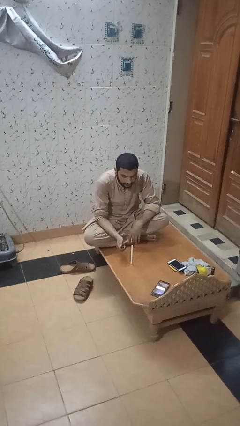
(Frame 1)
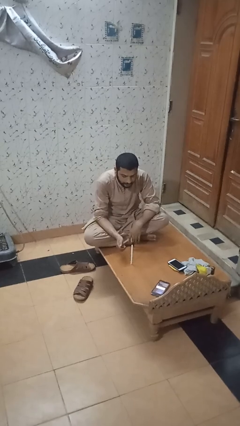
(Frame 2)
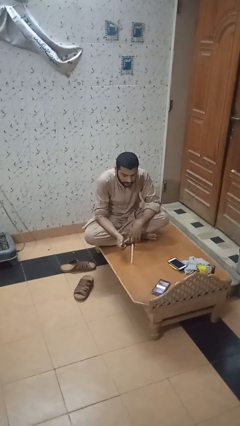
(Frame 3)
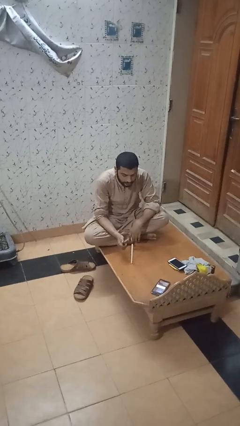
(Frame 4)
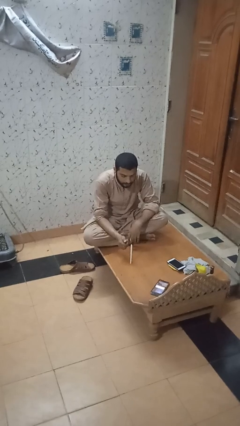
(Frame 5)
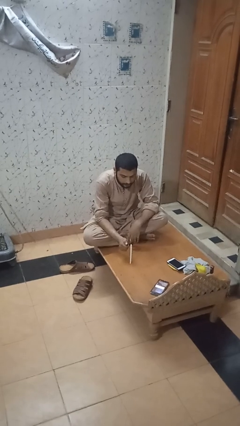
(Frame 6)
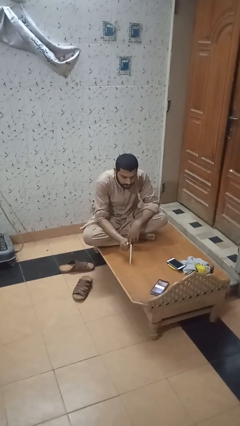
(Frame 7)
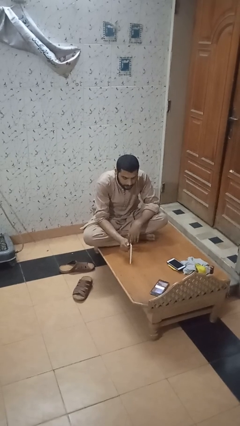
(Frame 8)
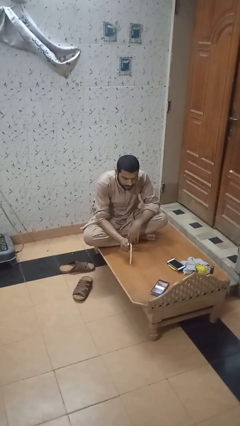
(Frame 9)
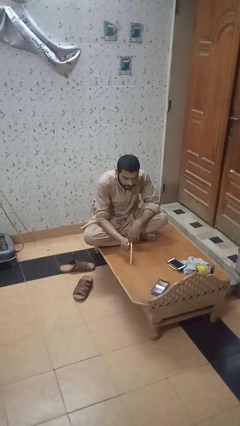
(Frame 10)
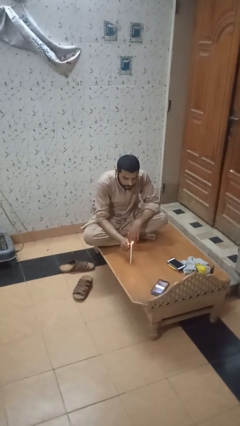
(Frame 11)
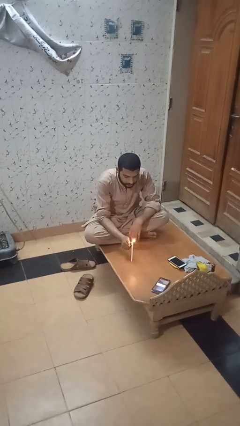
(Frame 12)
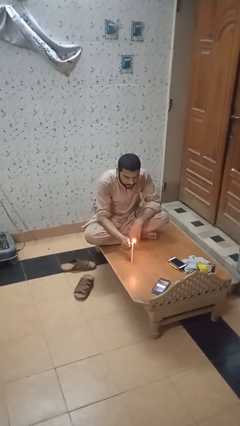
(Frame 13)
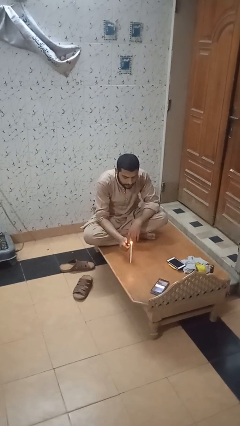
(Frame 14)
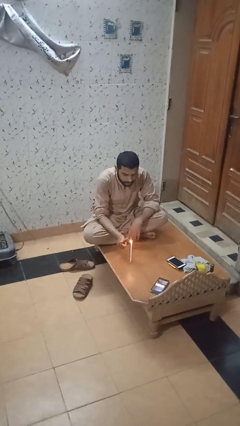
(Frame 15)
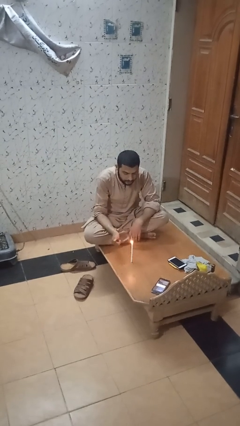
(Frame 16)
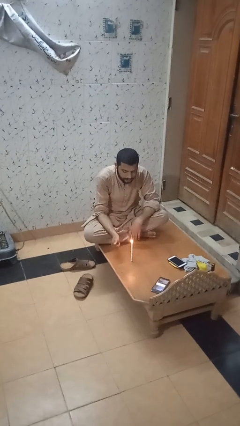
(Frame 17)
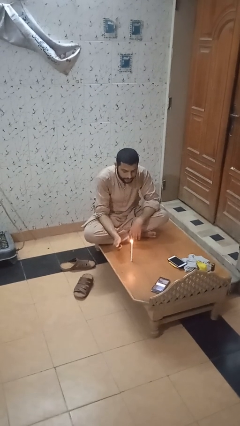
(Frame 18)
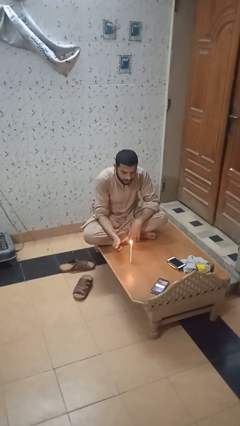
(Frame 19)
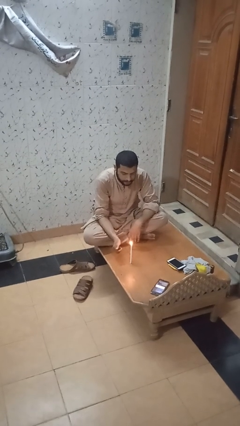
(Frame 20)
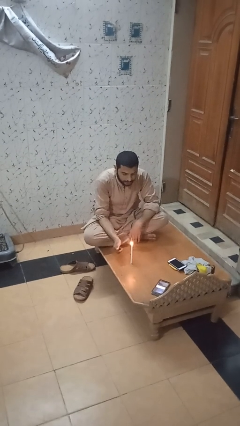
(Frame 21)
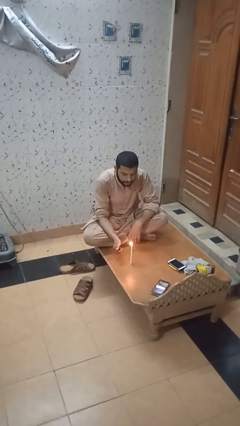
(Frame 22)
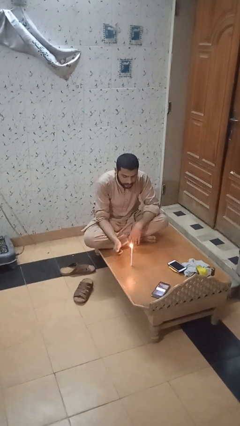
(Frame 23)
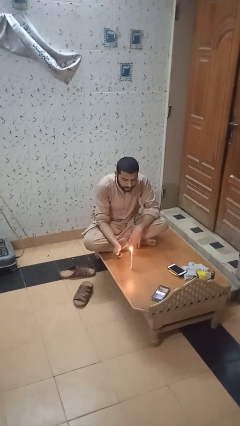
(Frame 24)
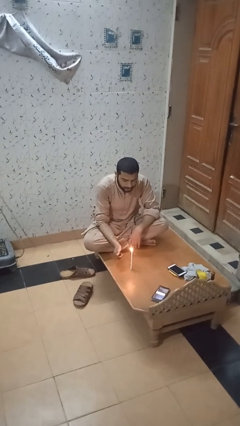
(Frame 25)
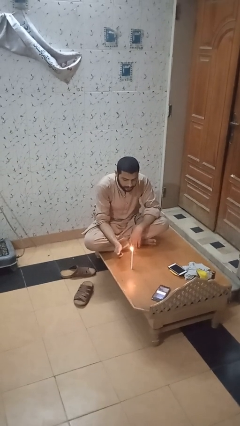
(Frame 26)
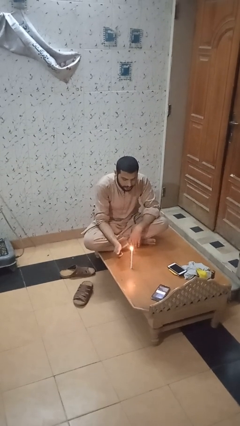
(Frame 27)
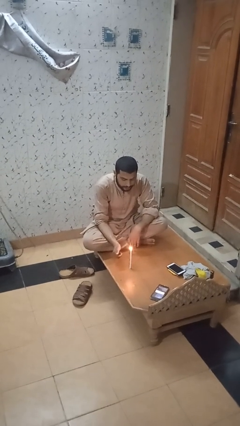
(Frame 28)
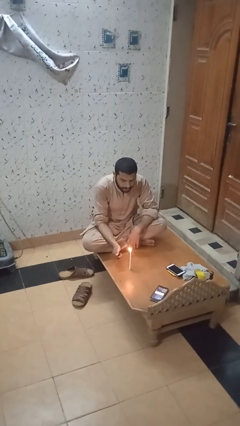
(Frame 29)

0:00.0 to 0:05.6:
person lights candle

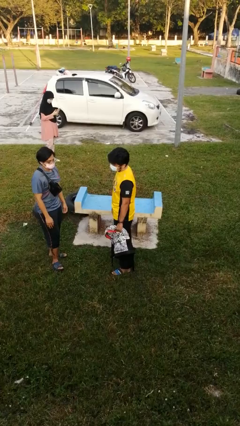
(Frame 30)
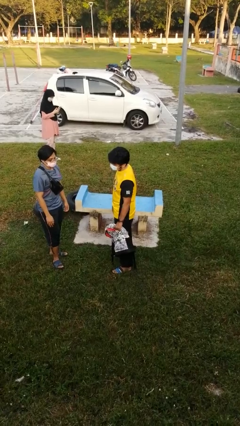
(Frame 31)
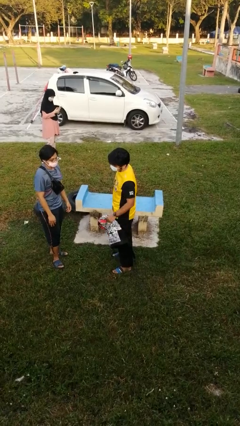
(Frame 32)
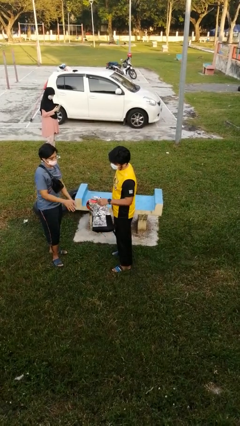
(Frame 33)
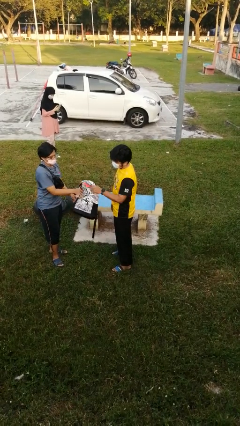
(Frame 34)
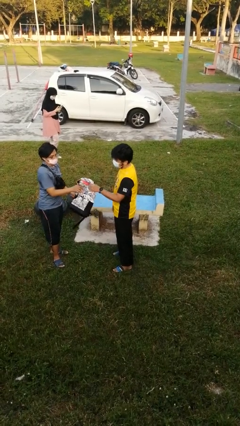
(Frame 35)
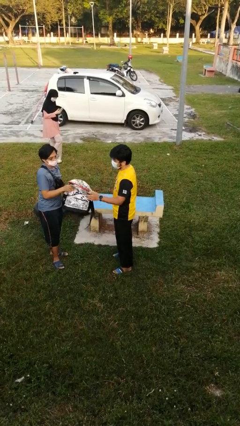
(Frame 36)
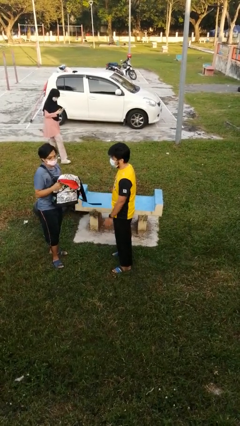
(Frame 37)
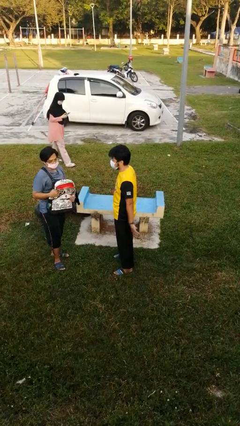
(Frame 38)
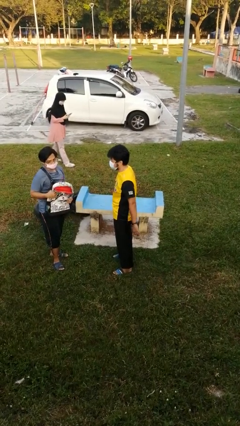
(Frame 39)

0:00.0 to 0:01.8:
person transfers object to person

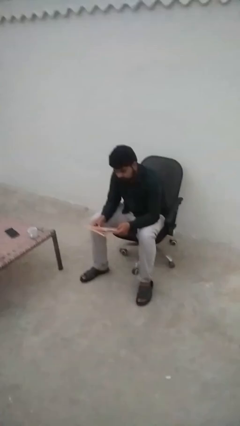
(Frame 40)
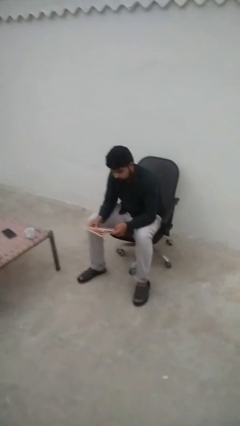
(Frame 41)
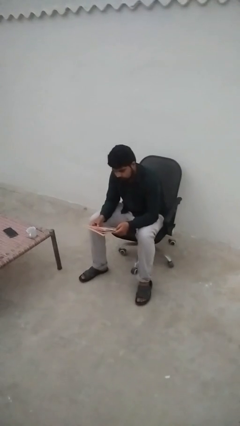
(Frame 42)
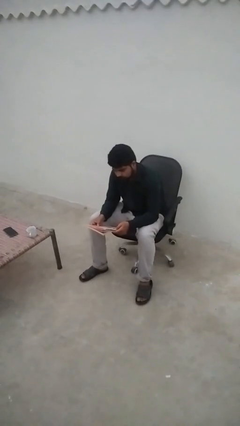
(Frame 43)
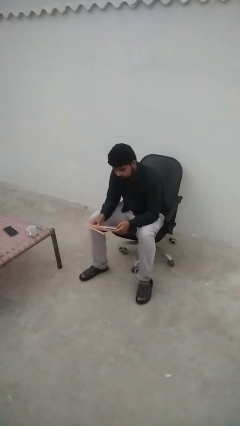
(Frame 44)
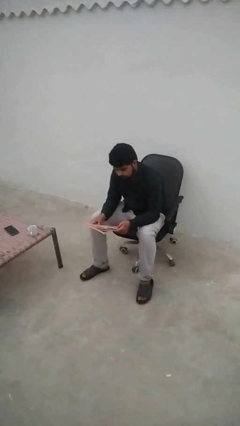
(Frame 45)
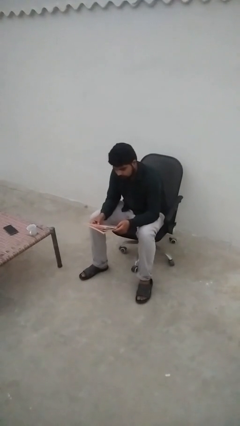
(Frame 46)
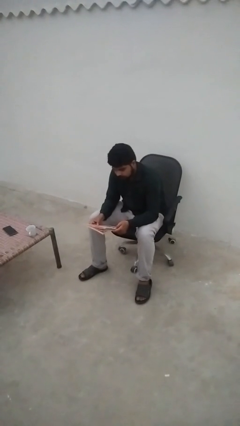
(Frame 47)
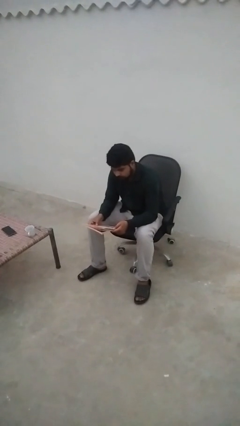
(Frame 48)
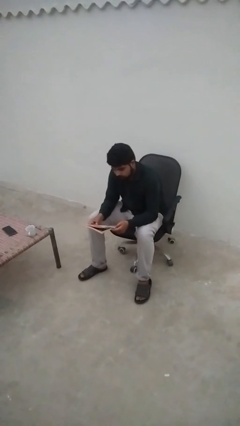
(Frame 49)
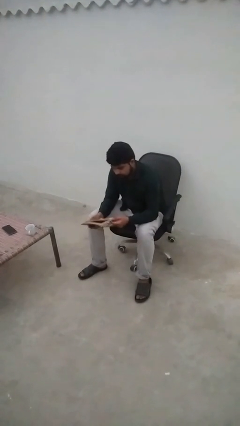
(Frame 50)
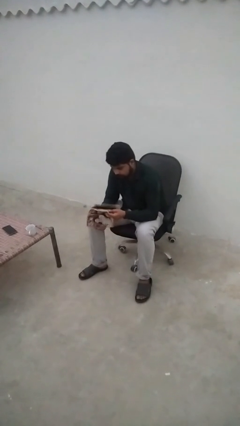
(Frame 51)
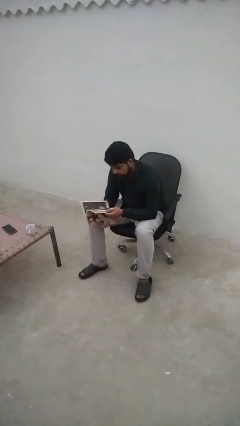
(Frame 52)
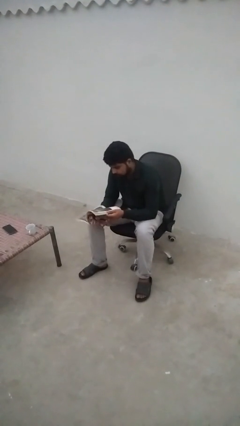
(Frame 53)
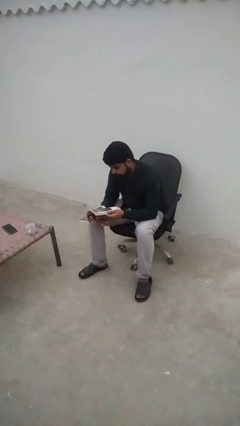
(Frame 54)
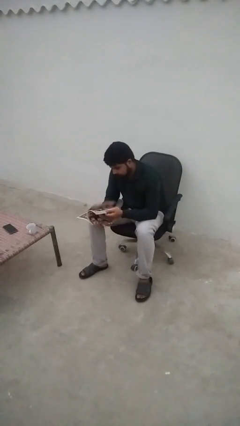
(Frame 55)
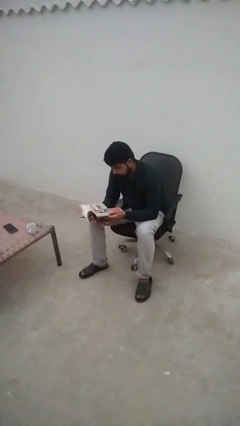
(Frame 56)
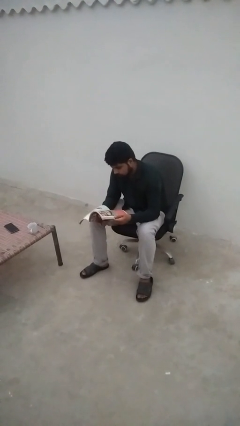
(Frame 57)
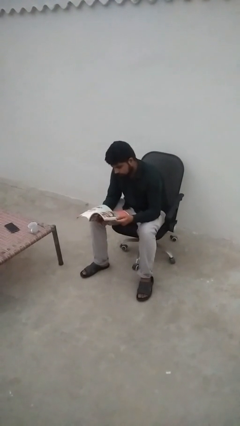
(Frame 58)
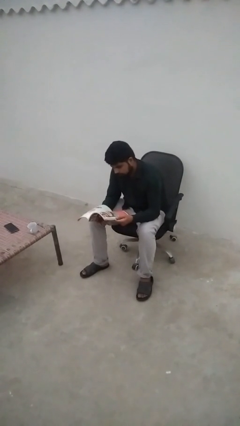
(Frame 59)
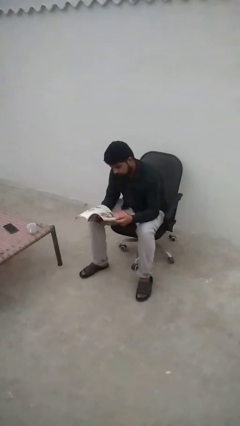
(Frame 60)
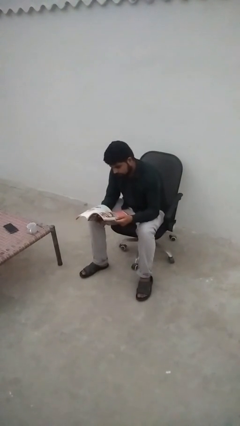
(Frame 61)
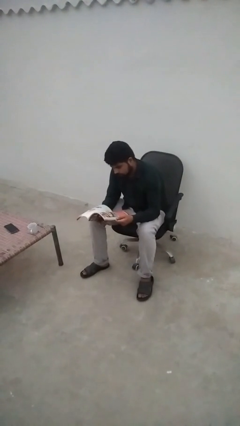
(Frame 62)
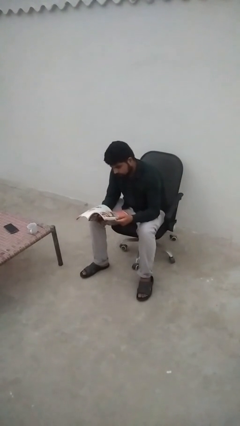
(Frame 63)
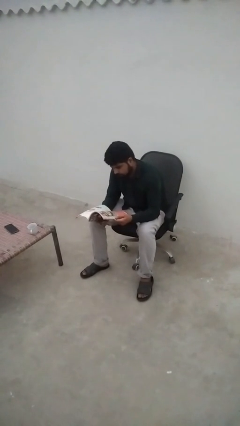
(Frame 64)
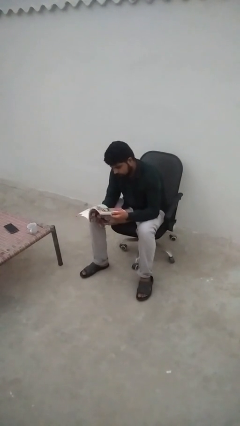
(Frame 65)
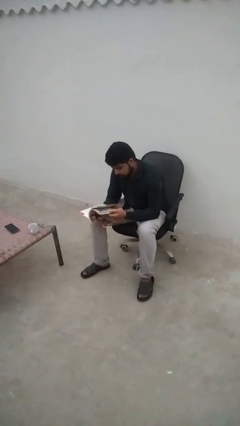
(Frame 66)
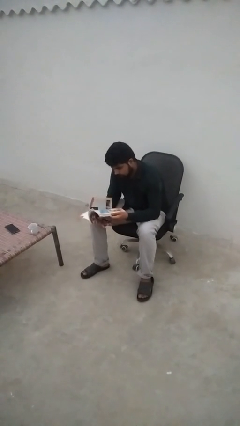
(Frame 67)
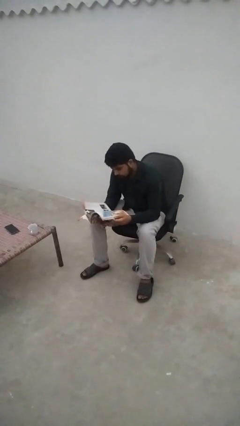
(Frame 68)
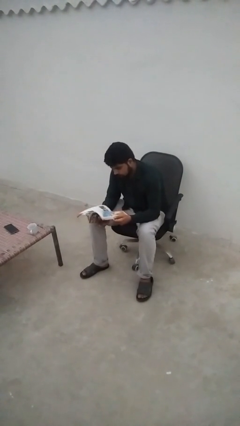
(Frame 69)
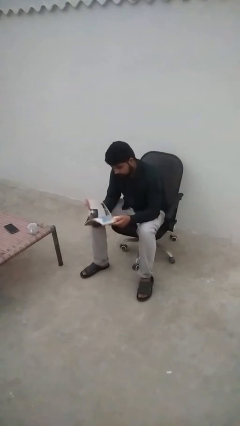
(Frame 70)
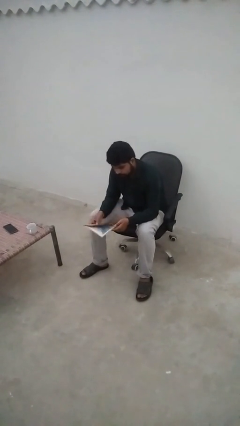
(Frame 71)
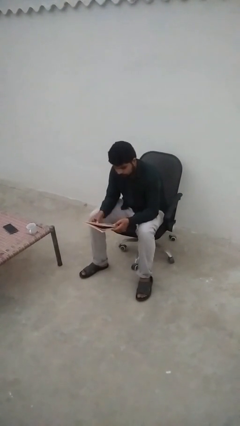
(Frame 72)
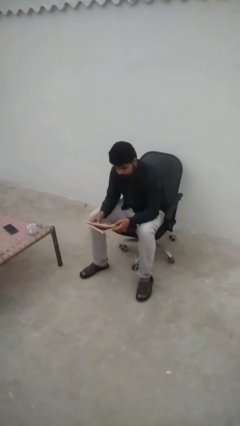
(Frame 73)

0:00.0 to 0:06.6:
person reads magazine

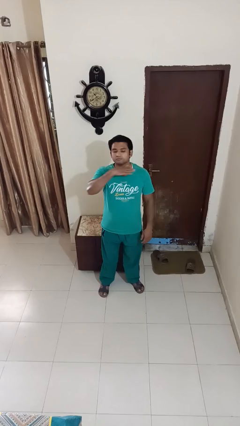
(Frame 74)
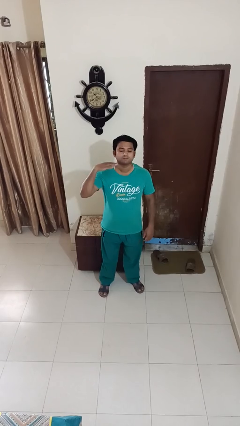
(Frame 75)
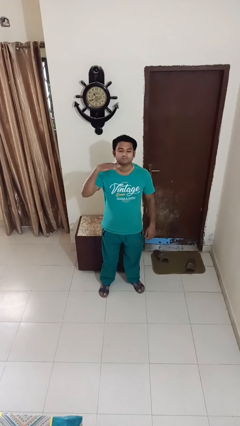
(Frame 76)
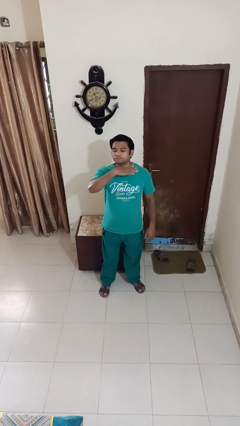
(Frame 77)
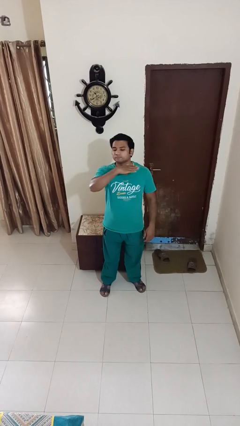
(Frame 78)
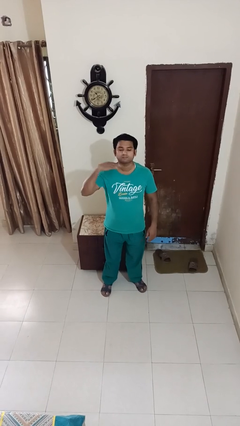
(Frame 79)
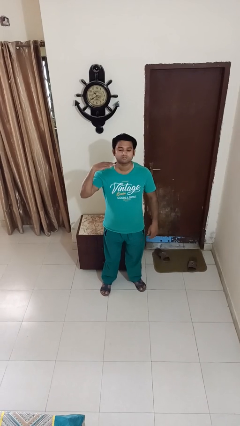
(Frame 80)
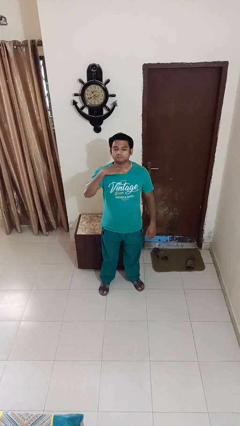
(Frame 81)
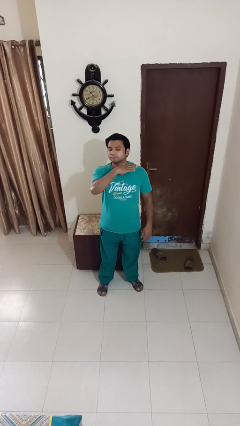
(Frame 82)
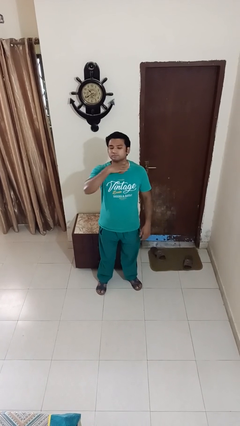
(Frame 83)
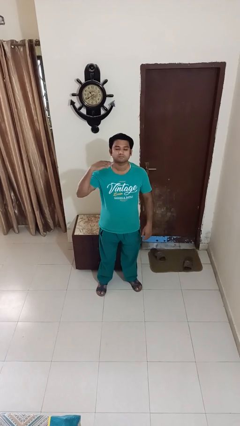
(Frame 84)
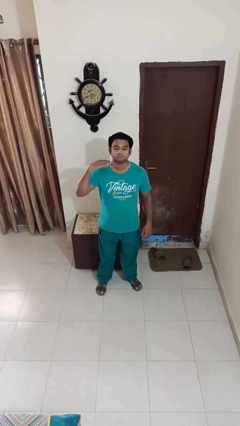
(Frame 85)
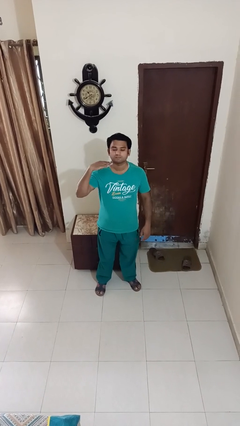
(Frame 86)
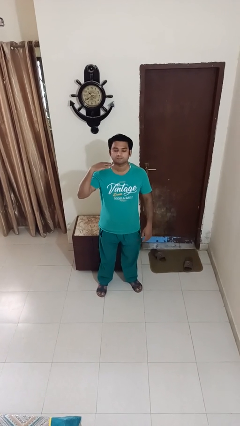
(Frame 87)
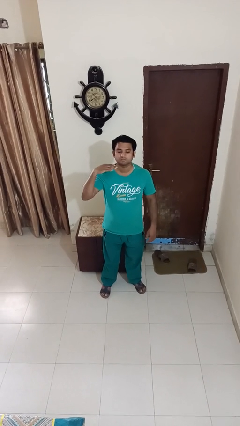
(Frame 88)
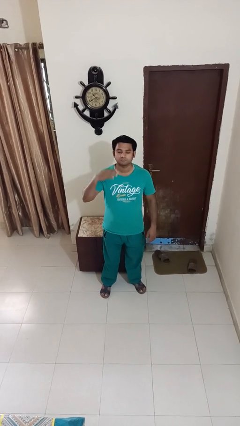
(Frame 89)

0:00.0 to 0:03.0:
person gestures cut

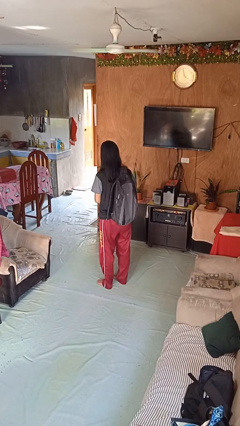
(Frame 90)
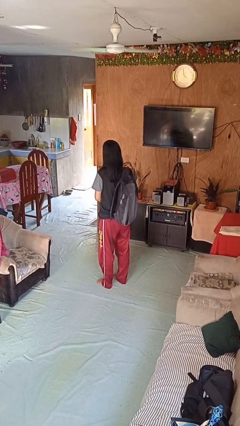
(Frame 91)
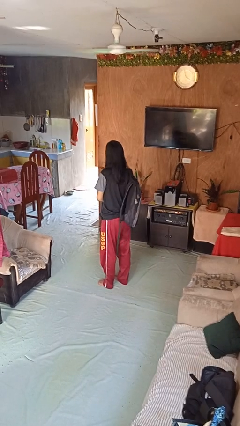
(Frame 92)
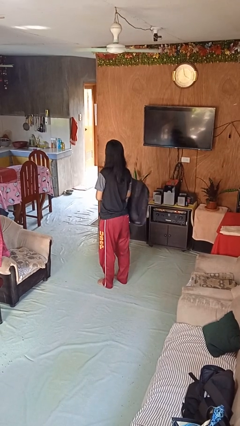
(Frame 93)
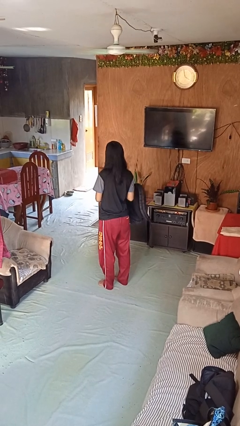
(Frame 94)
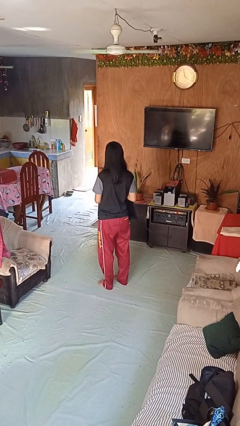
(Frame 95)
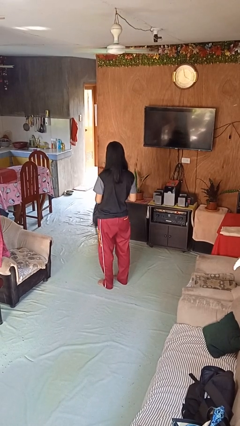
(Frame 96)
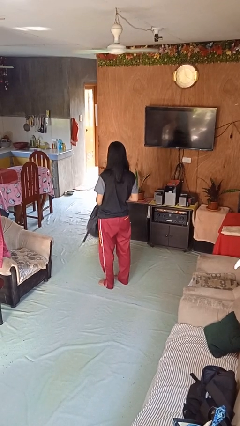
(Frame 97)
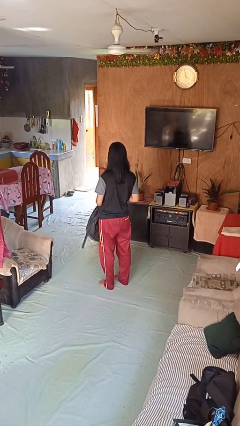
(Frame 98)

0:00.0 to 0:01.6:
person takes off backpack
